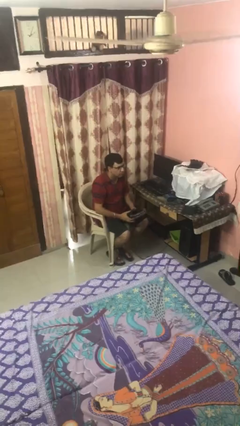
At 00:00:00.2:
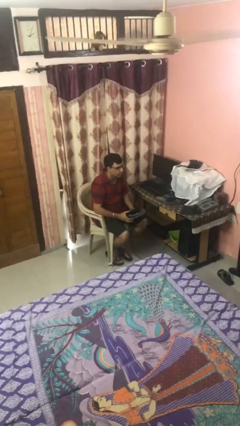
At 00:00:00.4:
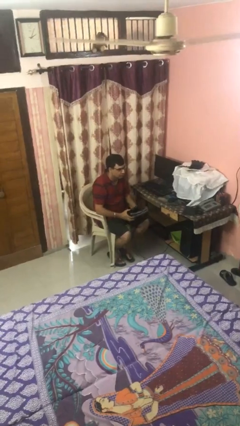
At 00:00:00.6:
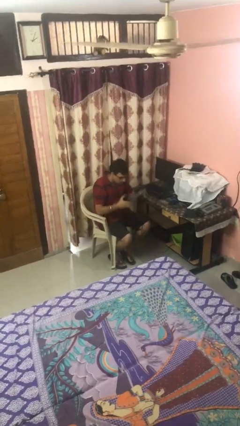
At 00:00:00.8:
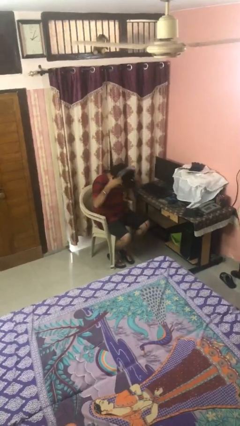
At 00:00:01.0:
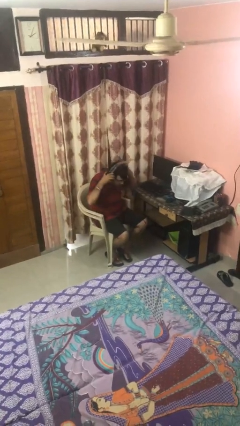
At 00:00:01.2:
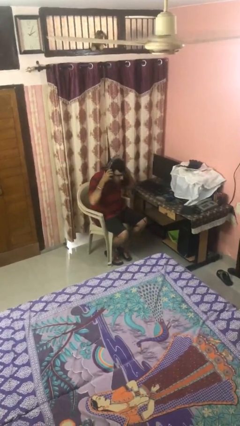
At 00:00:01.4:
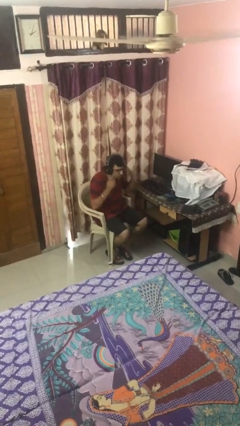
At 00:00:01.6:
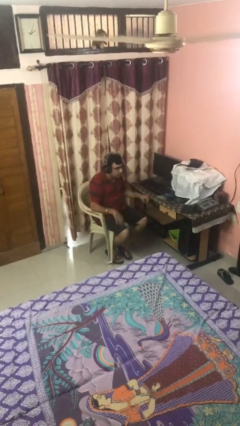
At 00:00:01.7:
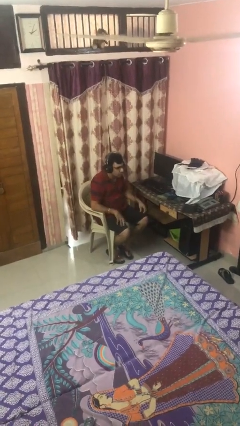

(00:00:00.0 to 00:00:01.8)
person puts on headphones

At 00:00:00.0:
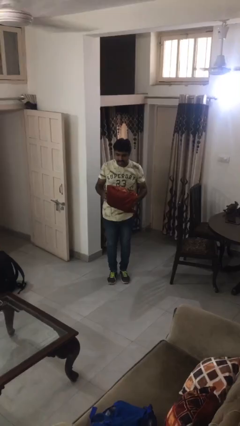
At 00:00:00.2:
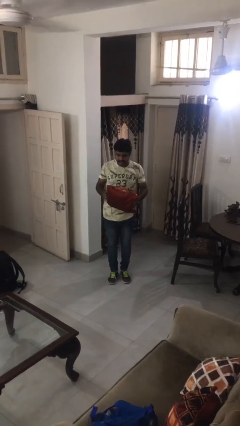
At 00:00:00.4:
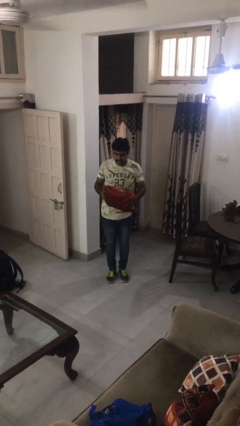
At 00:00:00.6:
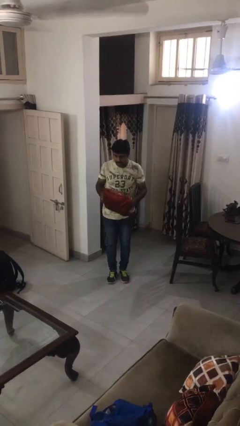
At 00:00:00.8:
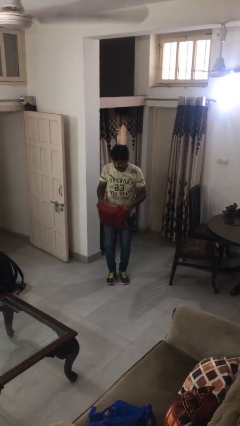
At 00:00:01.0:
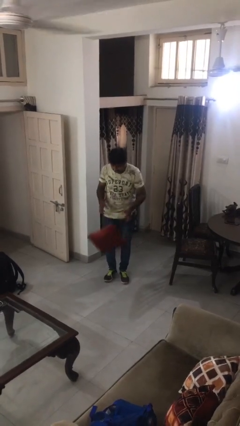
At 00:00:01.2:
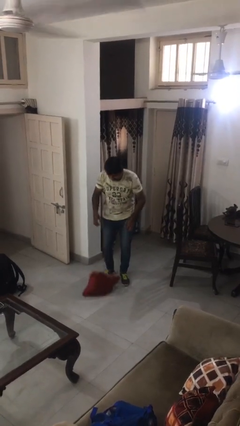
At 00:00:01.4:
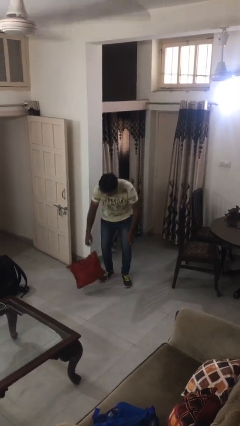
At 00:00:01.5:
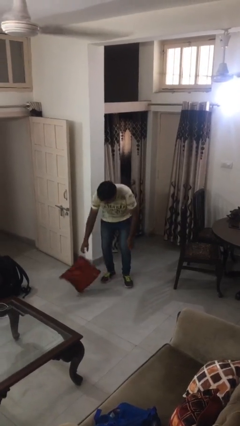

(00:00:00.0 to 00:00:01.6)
person drops object

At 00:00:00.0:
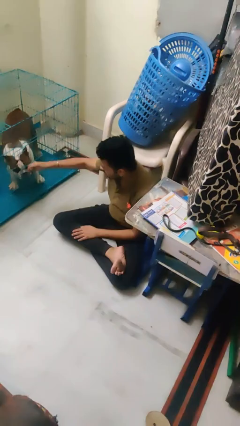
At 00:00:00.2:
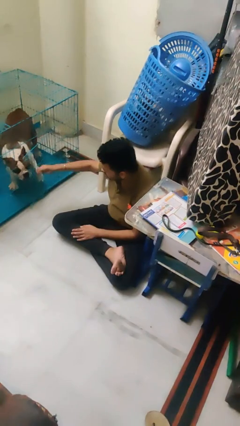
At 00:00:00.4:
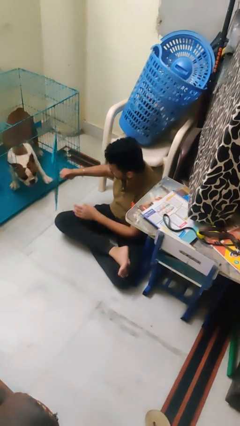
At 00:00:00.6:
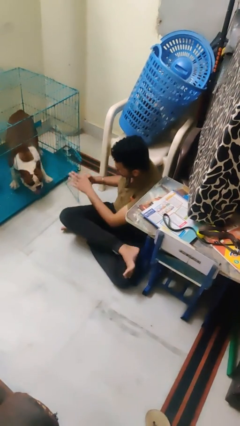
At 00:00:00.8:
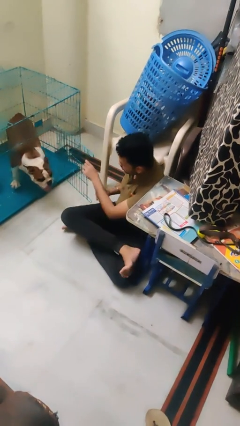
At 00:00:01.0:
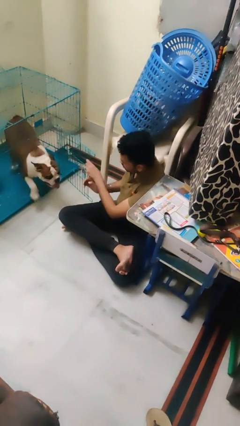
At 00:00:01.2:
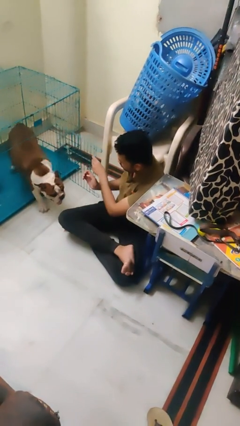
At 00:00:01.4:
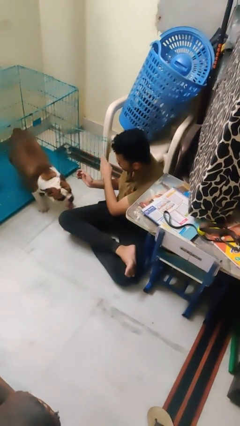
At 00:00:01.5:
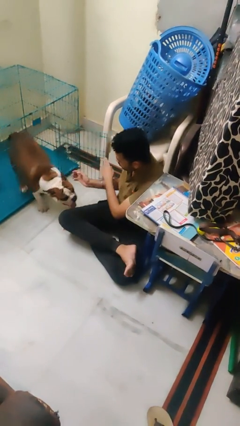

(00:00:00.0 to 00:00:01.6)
person uncrates dog

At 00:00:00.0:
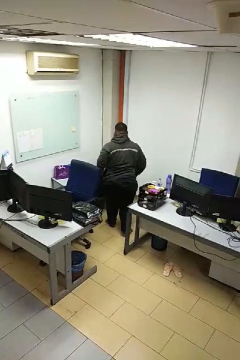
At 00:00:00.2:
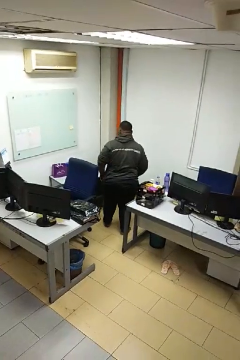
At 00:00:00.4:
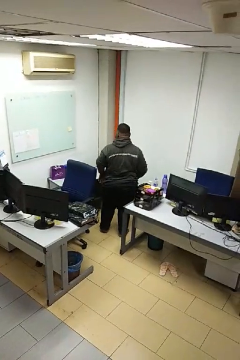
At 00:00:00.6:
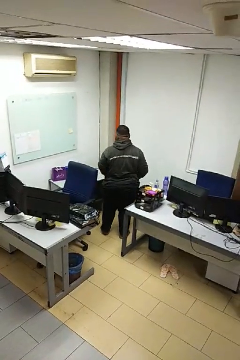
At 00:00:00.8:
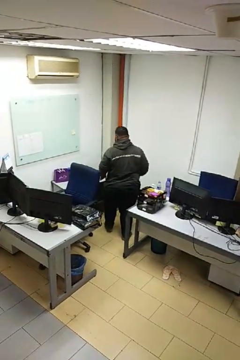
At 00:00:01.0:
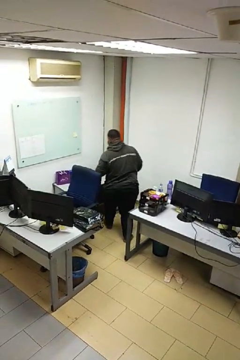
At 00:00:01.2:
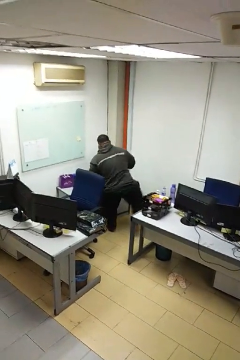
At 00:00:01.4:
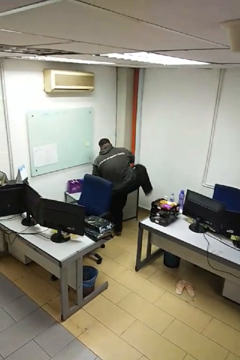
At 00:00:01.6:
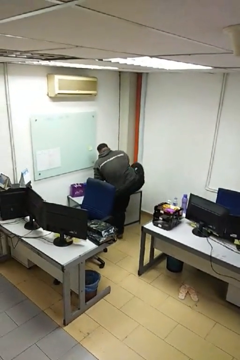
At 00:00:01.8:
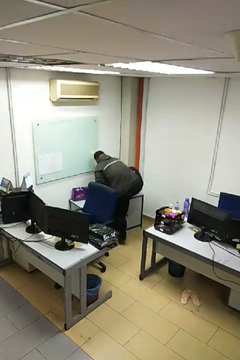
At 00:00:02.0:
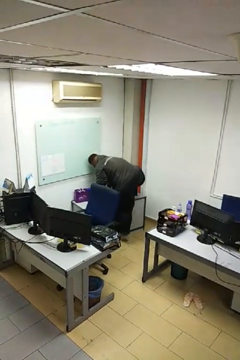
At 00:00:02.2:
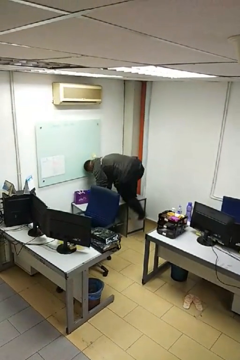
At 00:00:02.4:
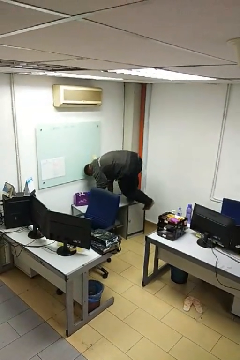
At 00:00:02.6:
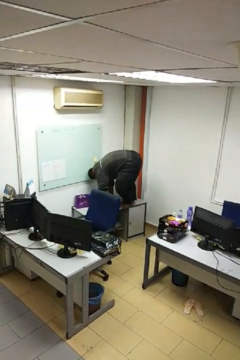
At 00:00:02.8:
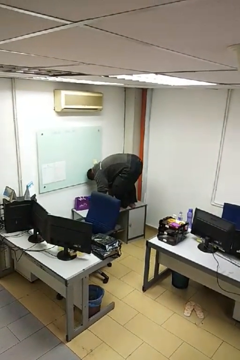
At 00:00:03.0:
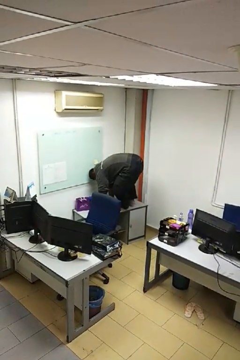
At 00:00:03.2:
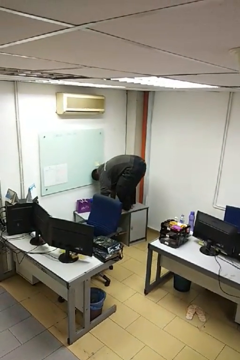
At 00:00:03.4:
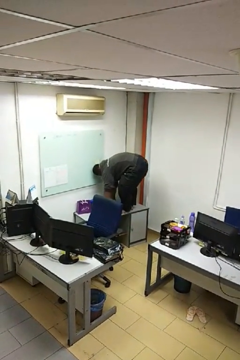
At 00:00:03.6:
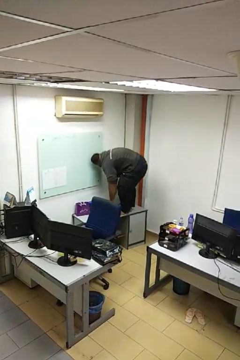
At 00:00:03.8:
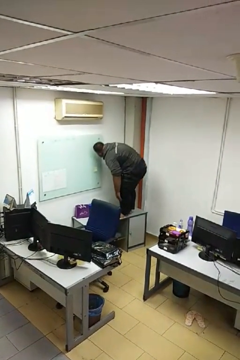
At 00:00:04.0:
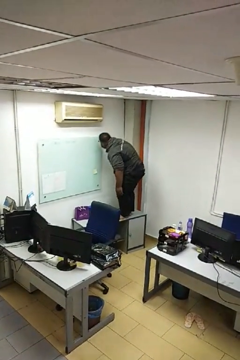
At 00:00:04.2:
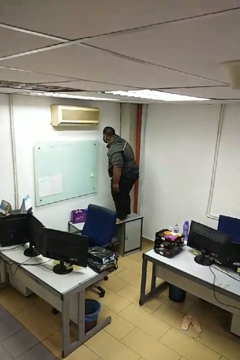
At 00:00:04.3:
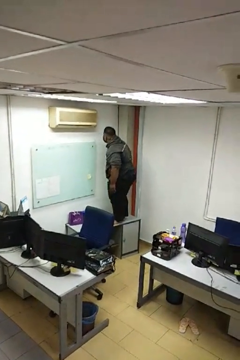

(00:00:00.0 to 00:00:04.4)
person climbs on table

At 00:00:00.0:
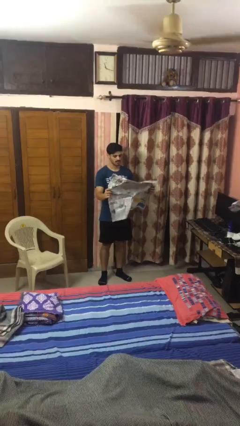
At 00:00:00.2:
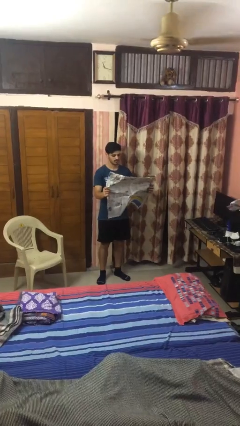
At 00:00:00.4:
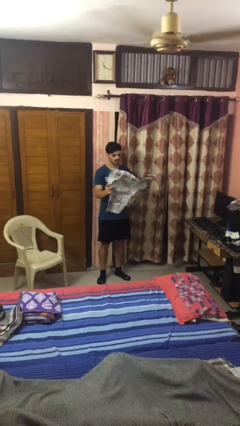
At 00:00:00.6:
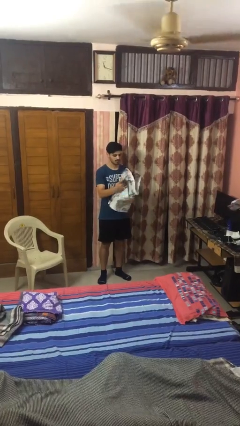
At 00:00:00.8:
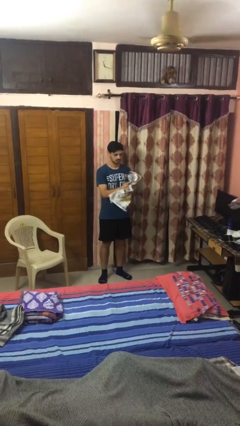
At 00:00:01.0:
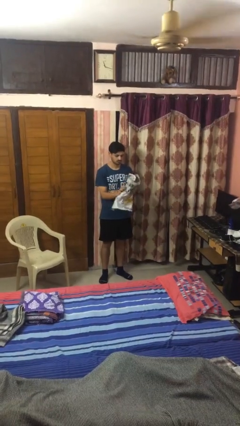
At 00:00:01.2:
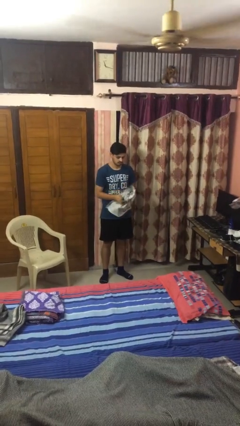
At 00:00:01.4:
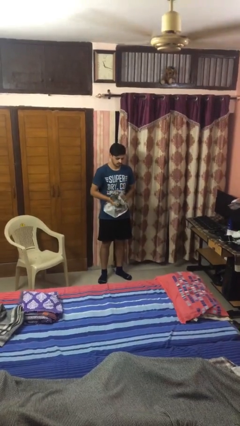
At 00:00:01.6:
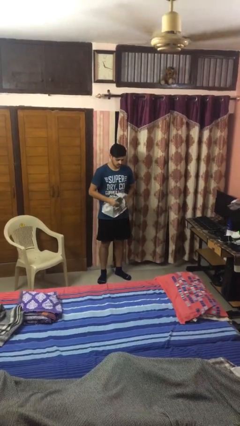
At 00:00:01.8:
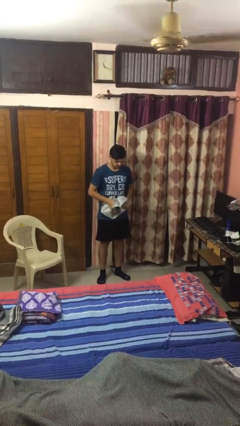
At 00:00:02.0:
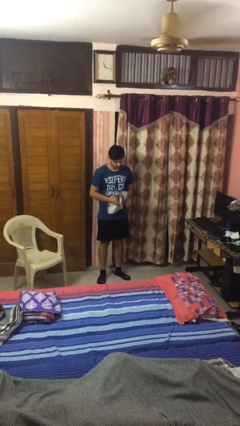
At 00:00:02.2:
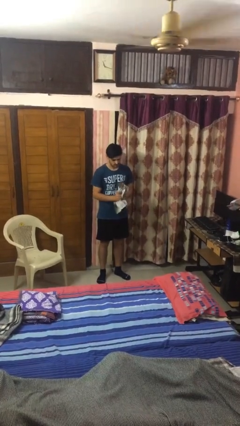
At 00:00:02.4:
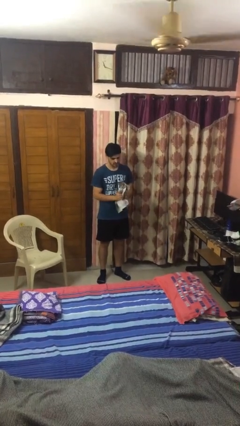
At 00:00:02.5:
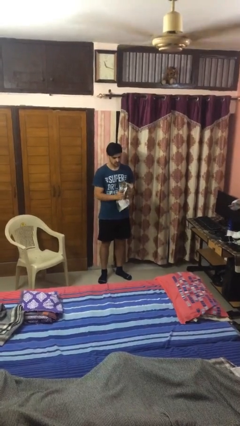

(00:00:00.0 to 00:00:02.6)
person crumples paper

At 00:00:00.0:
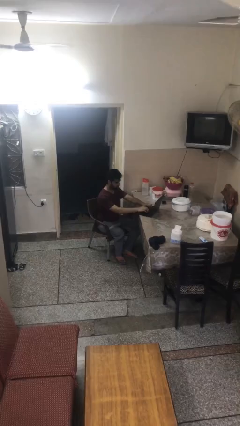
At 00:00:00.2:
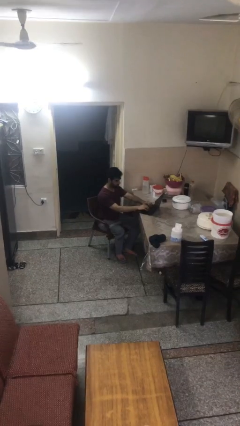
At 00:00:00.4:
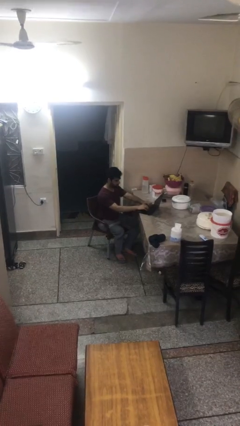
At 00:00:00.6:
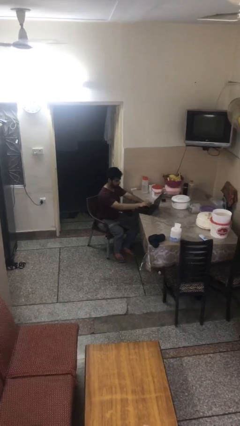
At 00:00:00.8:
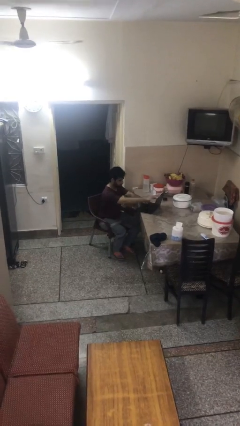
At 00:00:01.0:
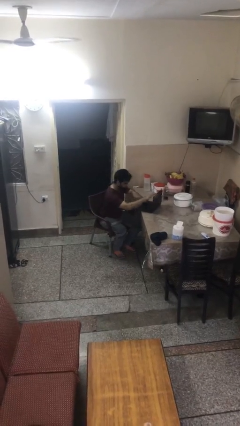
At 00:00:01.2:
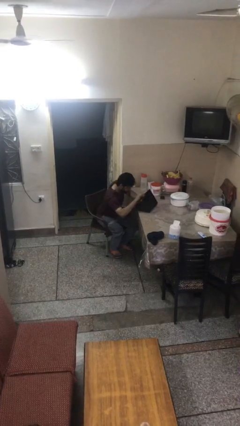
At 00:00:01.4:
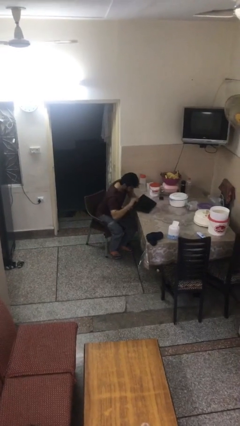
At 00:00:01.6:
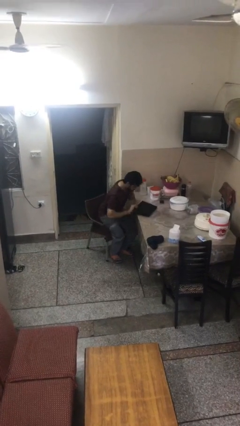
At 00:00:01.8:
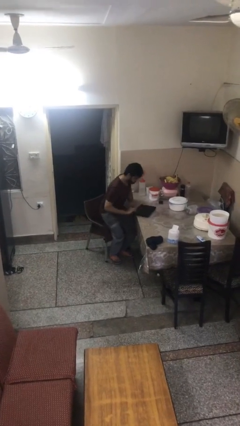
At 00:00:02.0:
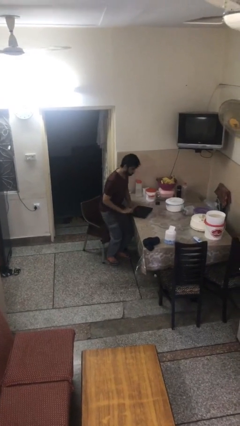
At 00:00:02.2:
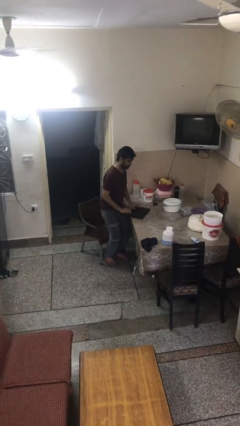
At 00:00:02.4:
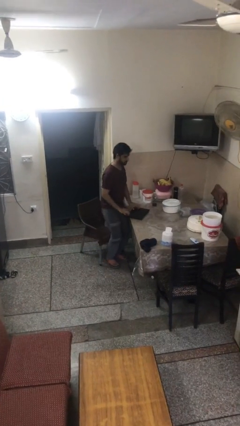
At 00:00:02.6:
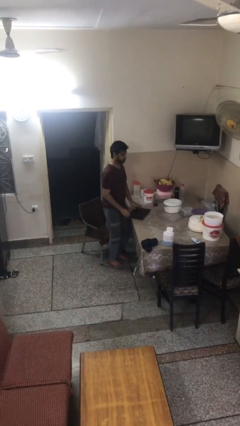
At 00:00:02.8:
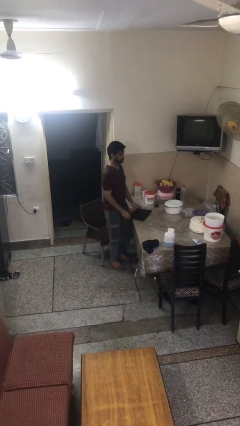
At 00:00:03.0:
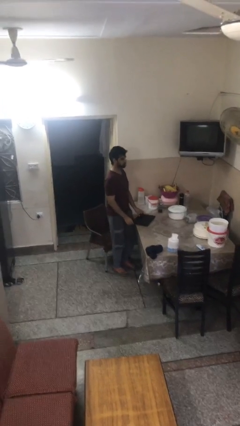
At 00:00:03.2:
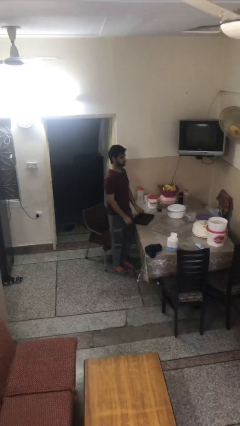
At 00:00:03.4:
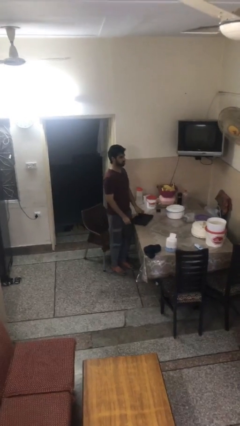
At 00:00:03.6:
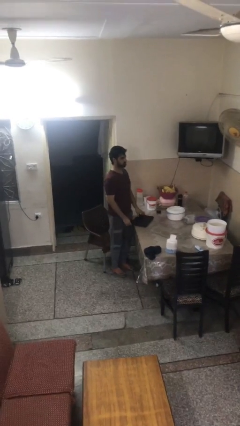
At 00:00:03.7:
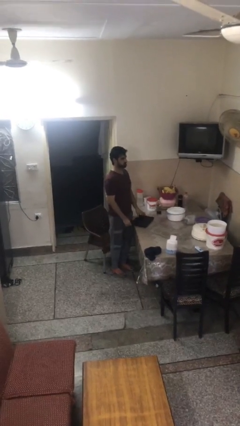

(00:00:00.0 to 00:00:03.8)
person stands up

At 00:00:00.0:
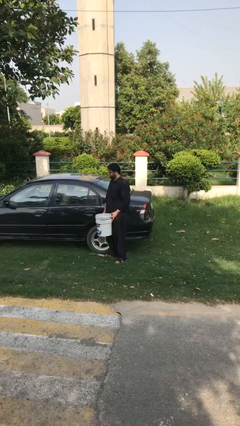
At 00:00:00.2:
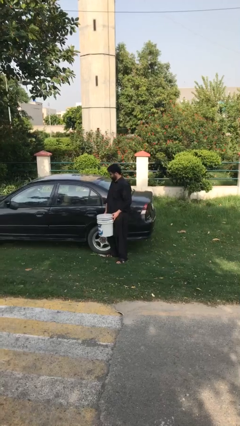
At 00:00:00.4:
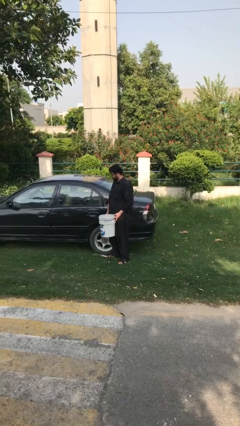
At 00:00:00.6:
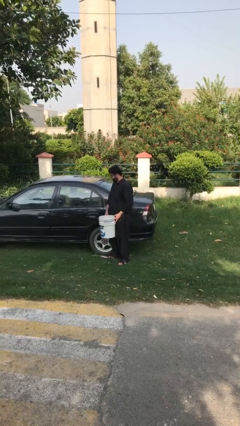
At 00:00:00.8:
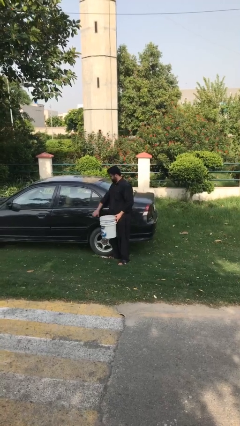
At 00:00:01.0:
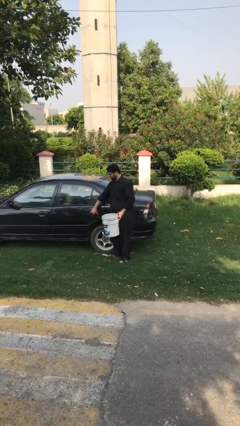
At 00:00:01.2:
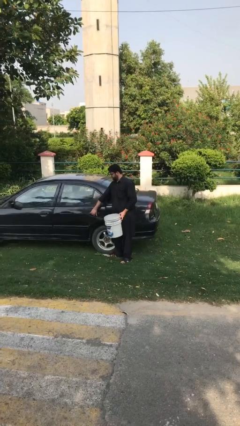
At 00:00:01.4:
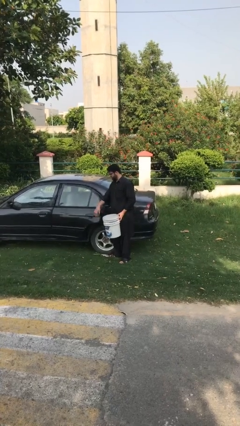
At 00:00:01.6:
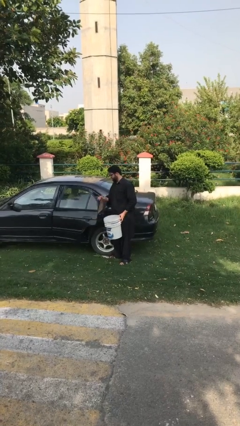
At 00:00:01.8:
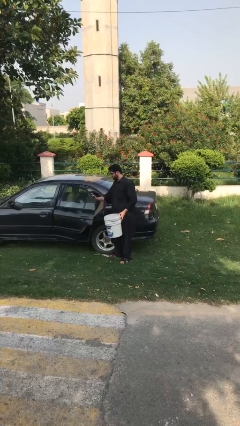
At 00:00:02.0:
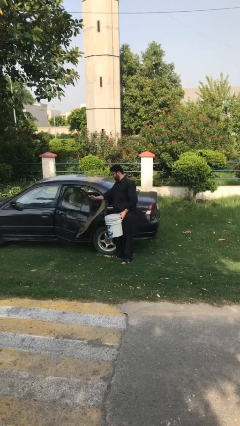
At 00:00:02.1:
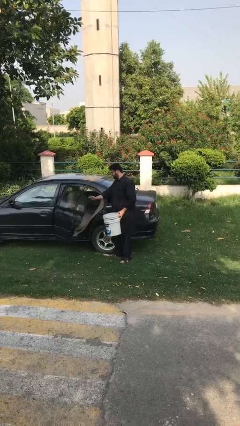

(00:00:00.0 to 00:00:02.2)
person opens car door
